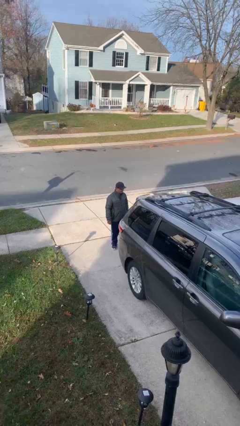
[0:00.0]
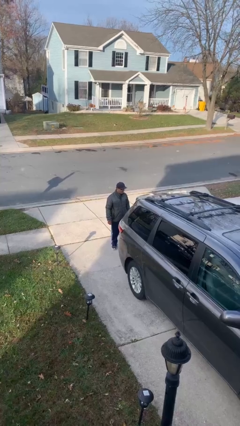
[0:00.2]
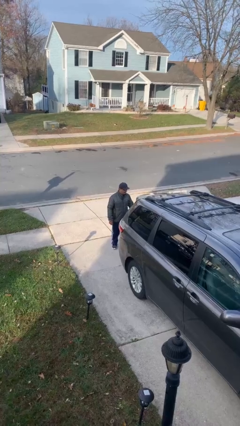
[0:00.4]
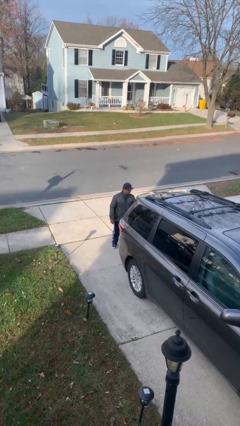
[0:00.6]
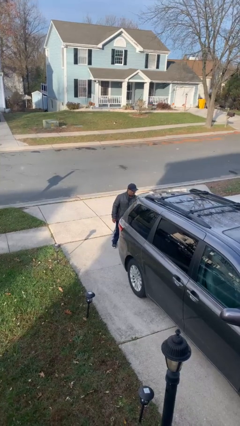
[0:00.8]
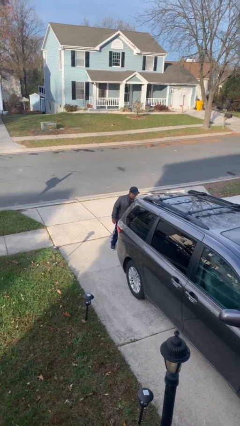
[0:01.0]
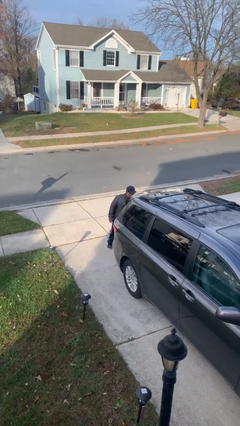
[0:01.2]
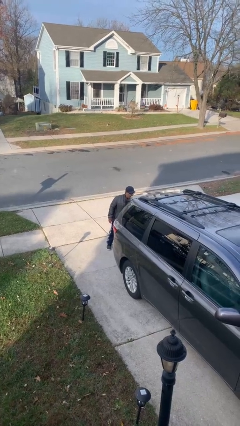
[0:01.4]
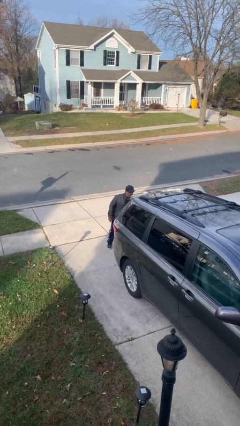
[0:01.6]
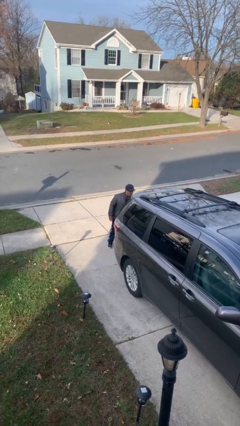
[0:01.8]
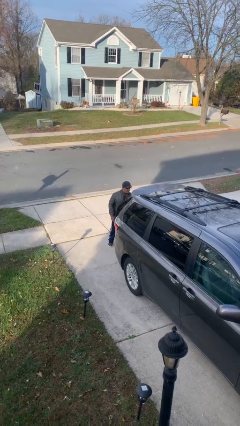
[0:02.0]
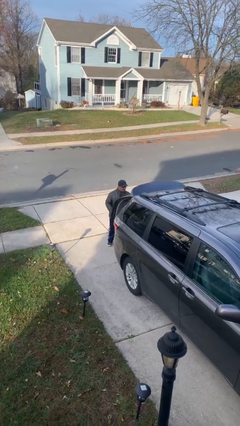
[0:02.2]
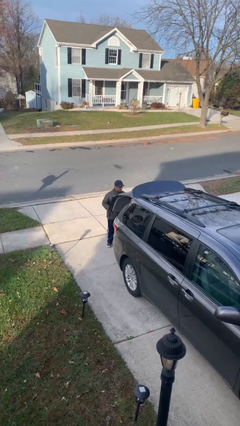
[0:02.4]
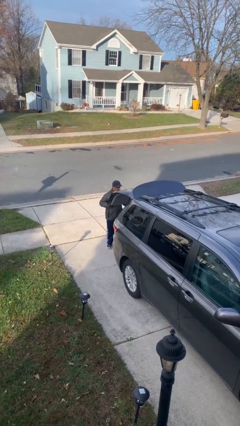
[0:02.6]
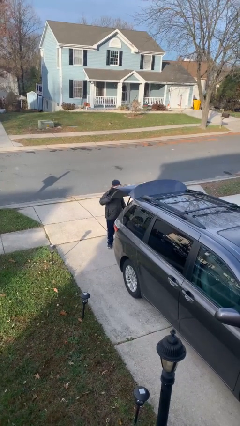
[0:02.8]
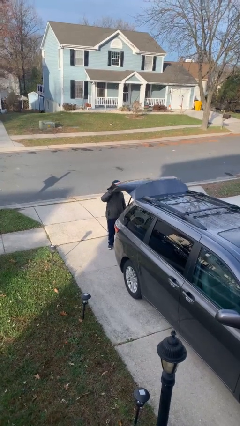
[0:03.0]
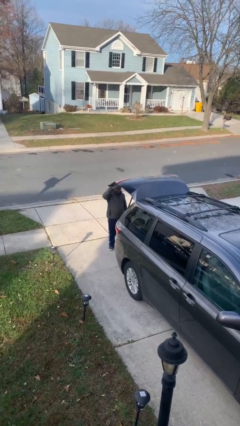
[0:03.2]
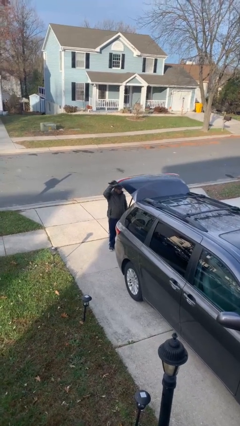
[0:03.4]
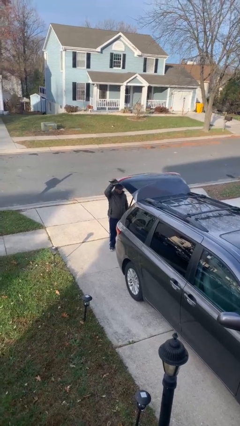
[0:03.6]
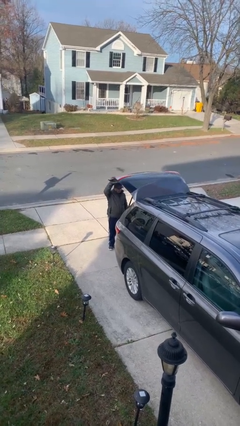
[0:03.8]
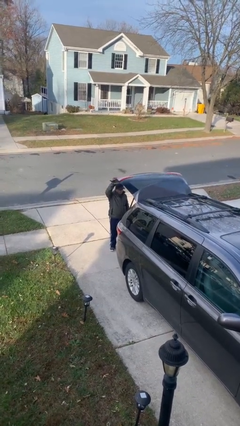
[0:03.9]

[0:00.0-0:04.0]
person opens car trunk

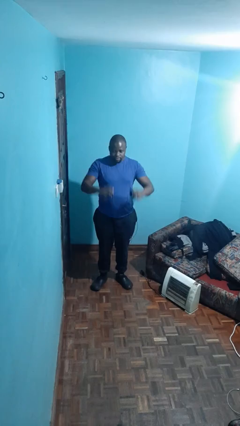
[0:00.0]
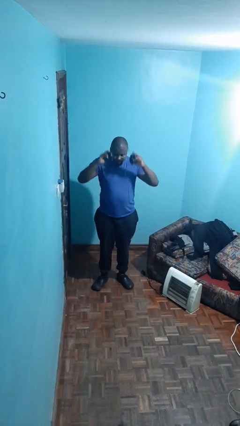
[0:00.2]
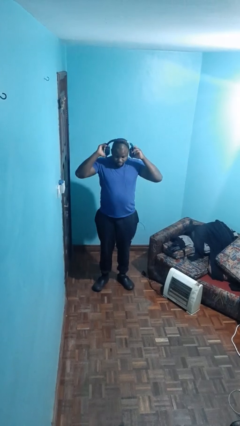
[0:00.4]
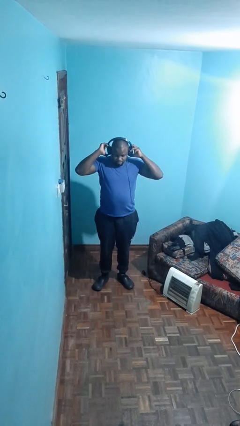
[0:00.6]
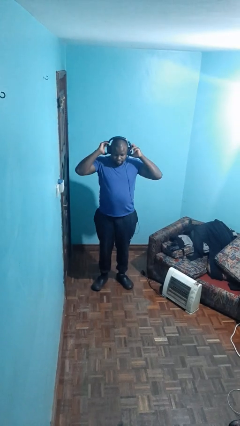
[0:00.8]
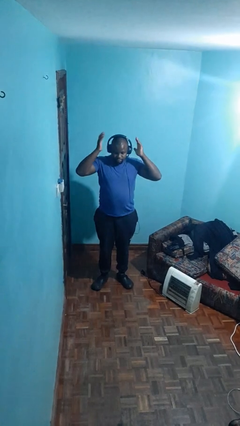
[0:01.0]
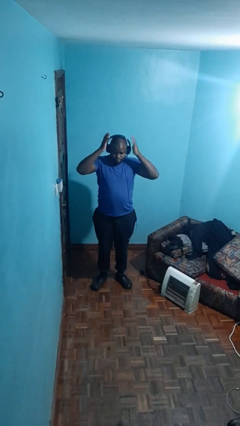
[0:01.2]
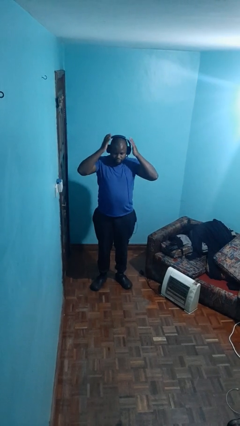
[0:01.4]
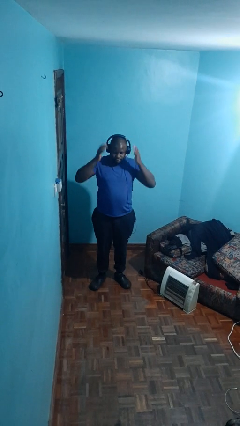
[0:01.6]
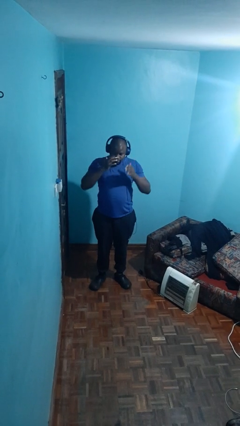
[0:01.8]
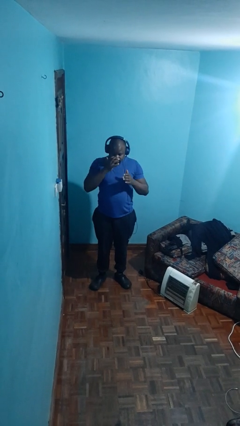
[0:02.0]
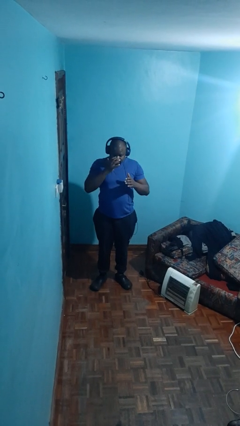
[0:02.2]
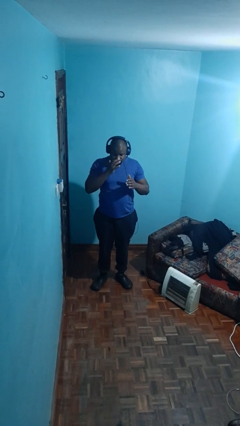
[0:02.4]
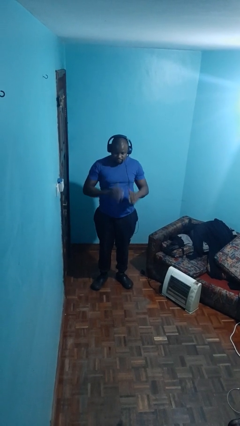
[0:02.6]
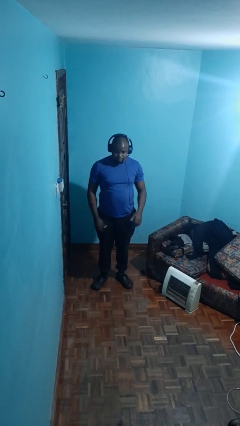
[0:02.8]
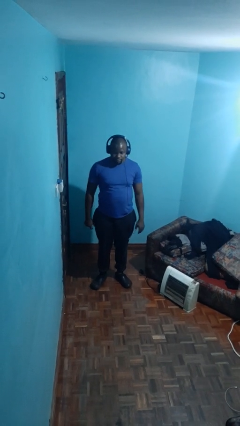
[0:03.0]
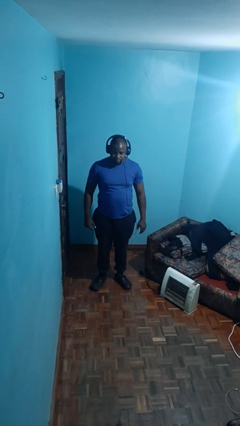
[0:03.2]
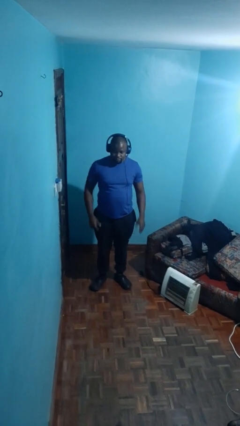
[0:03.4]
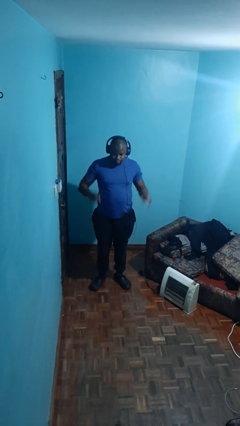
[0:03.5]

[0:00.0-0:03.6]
person puts on headphones

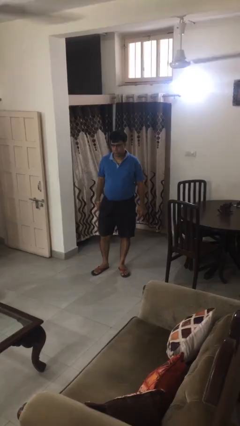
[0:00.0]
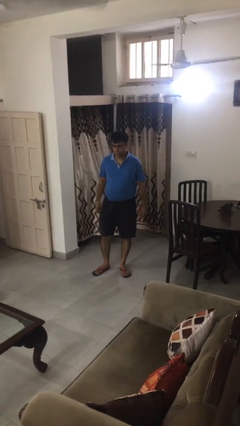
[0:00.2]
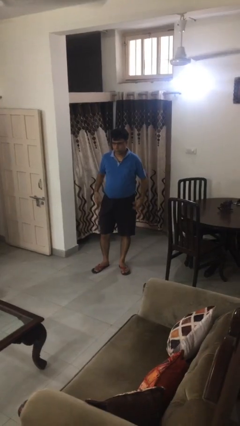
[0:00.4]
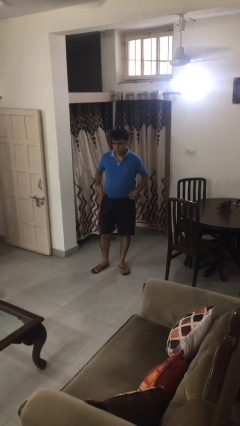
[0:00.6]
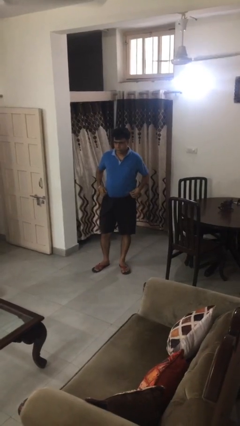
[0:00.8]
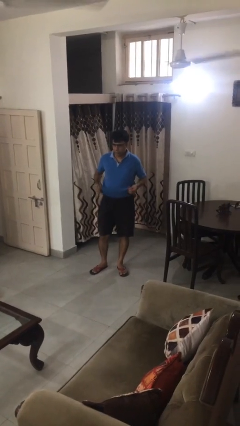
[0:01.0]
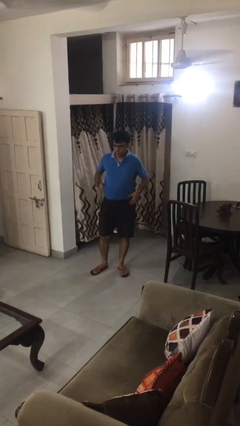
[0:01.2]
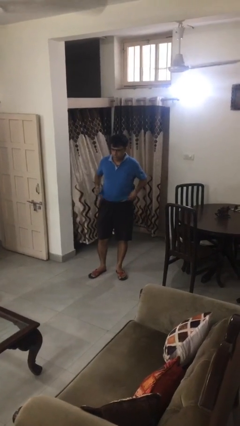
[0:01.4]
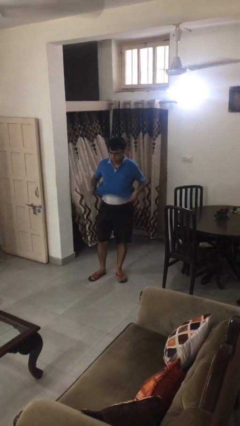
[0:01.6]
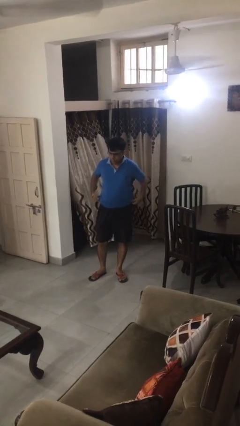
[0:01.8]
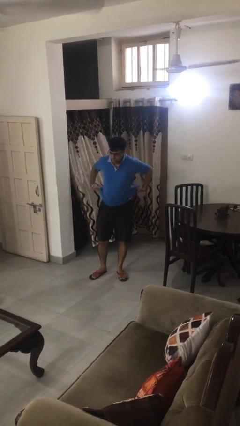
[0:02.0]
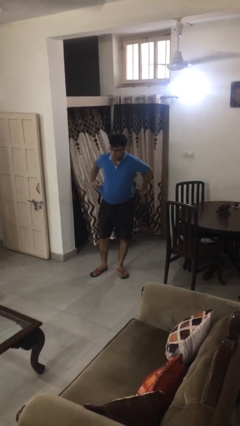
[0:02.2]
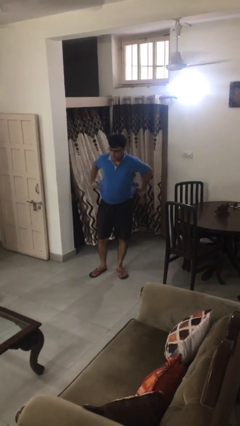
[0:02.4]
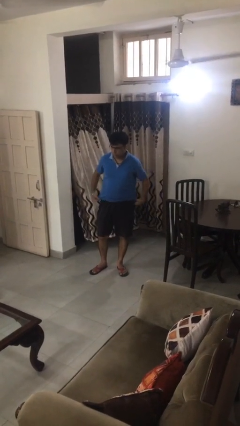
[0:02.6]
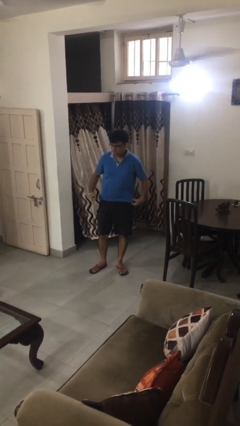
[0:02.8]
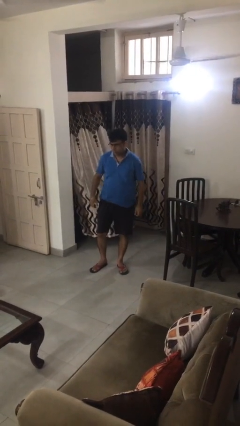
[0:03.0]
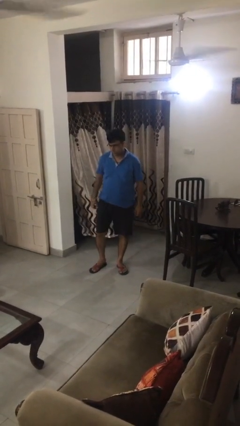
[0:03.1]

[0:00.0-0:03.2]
person untucks shirt

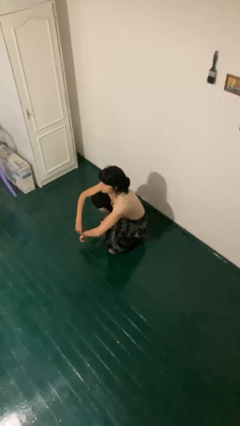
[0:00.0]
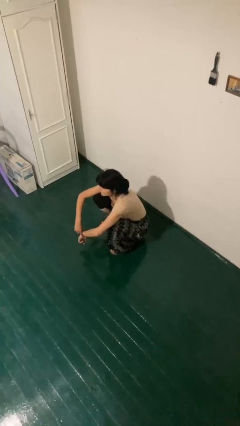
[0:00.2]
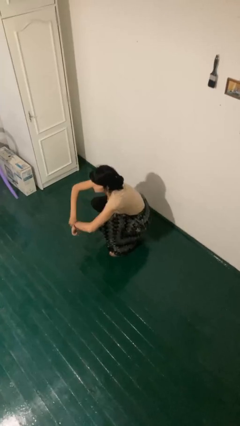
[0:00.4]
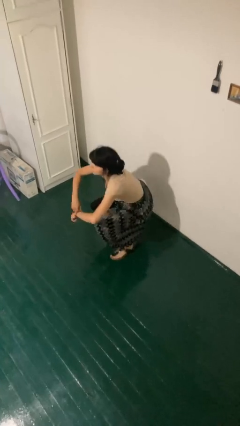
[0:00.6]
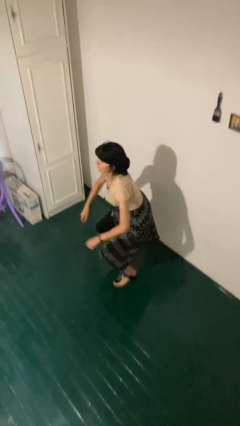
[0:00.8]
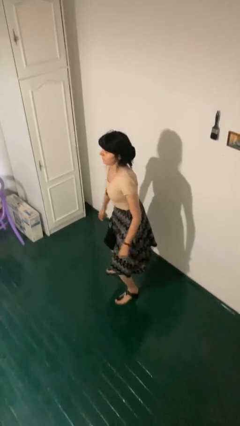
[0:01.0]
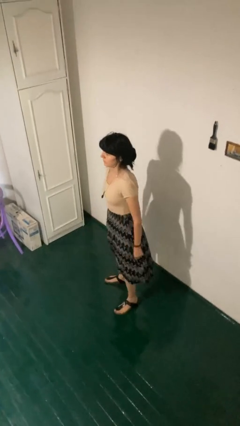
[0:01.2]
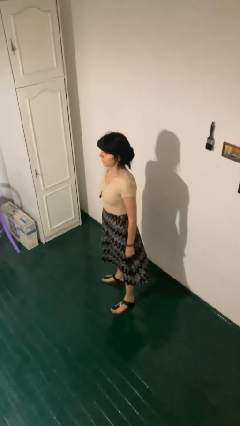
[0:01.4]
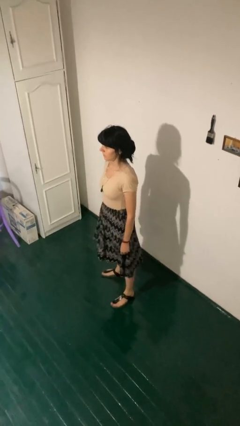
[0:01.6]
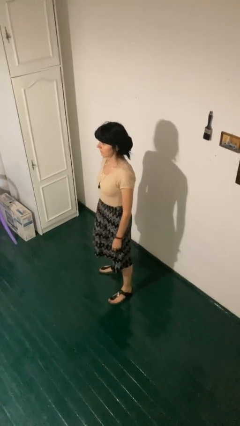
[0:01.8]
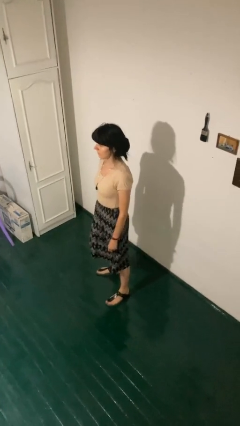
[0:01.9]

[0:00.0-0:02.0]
person stands up

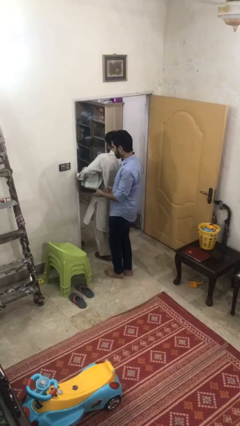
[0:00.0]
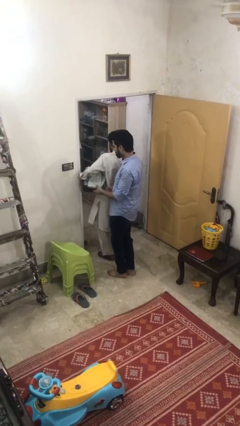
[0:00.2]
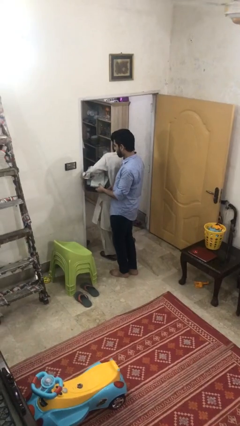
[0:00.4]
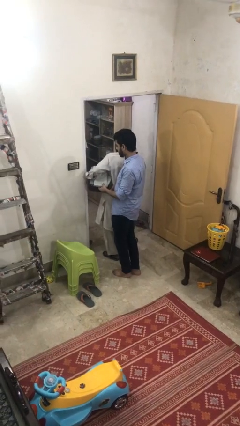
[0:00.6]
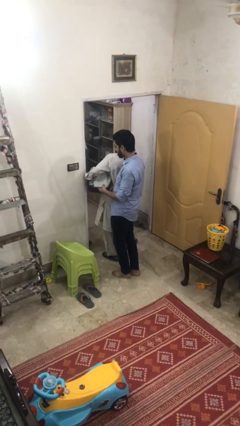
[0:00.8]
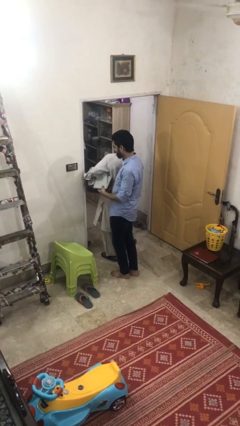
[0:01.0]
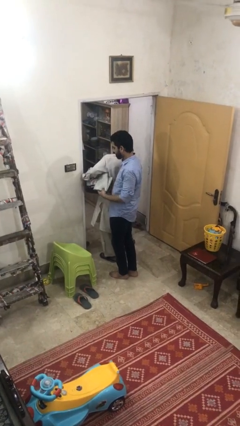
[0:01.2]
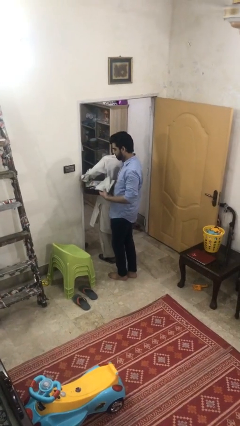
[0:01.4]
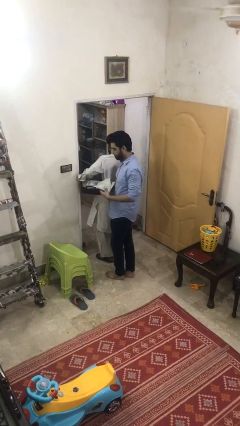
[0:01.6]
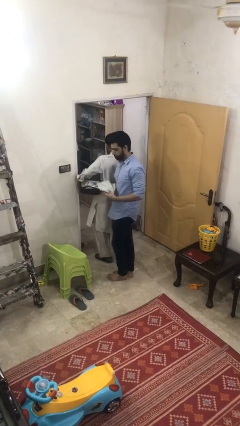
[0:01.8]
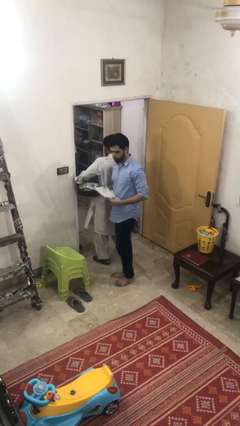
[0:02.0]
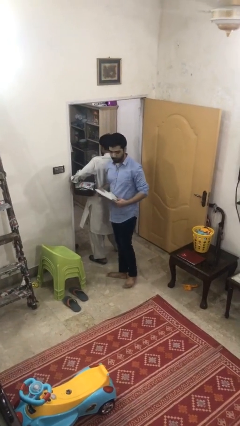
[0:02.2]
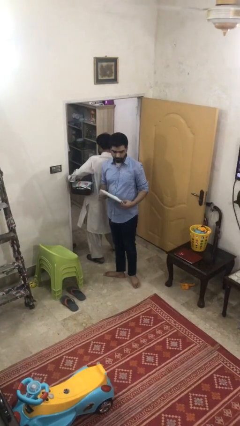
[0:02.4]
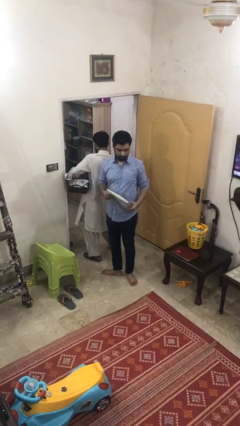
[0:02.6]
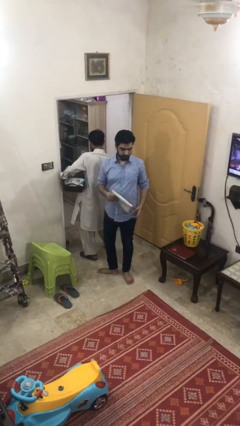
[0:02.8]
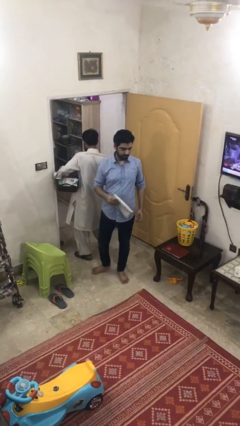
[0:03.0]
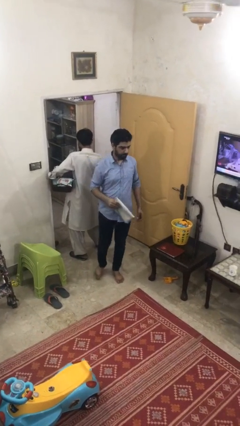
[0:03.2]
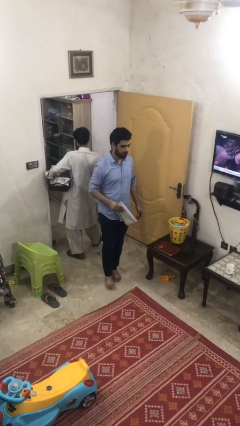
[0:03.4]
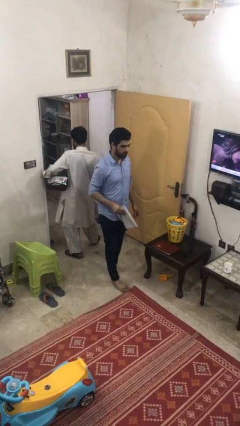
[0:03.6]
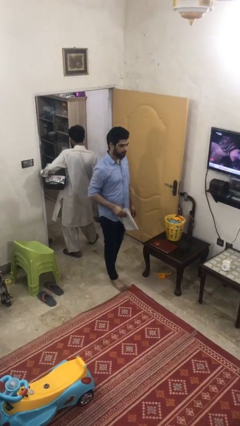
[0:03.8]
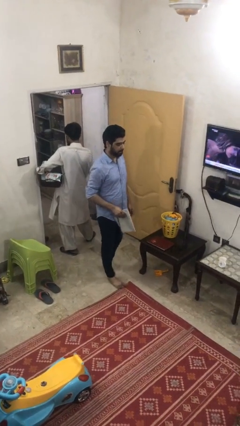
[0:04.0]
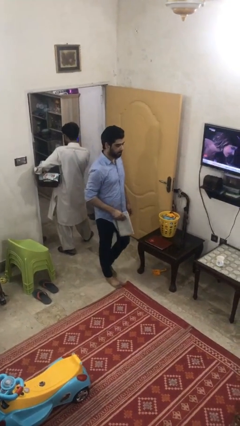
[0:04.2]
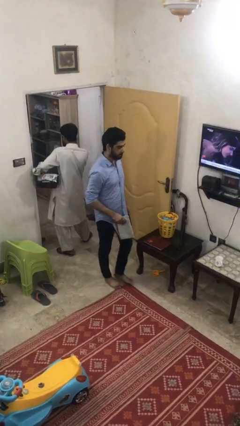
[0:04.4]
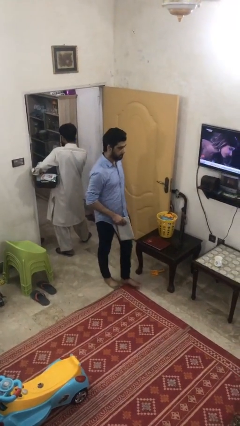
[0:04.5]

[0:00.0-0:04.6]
person steals object from person
